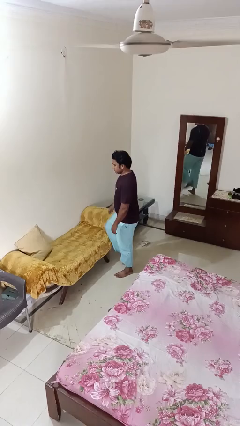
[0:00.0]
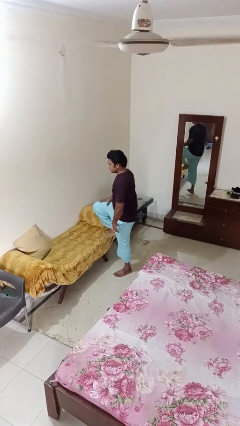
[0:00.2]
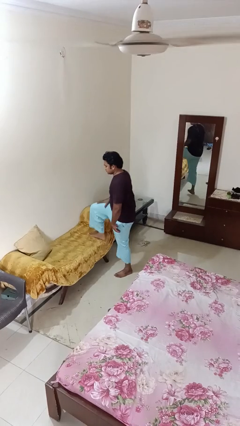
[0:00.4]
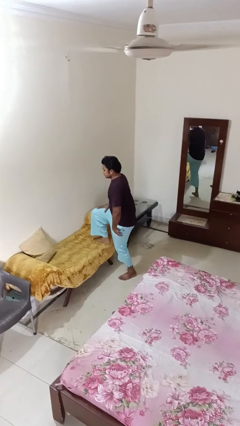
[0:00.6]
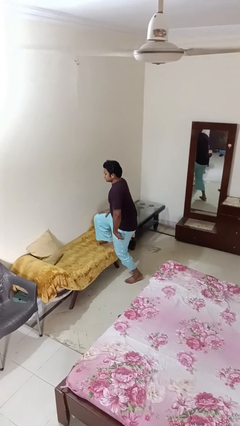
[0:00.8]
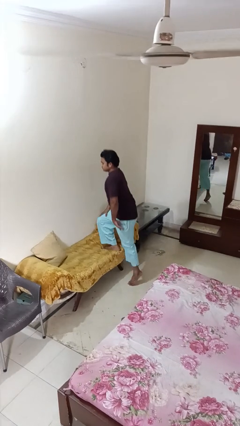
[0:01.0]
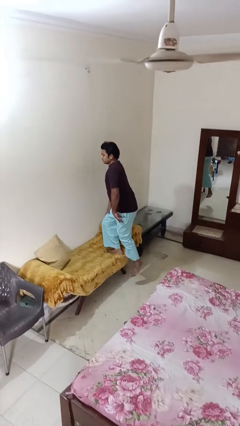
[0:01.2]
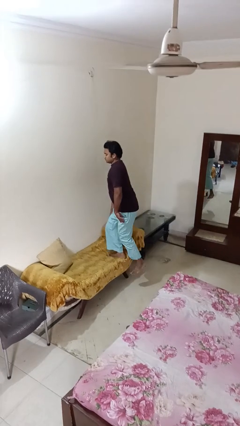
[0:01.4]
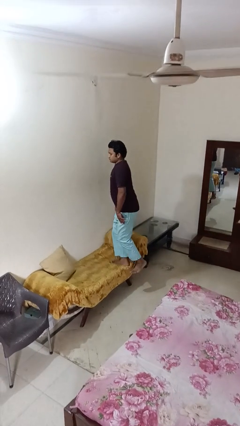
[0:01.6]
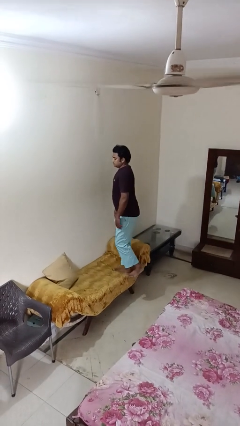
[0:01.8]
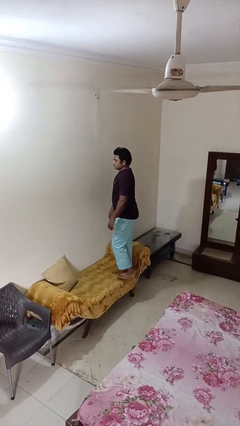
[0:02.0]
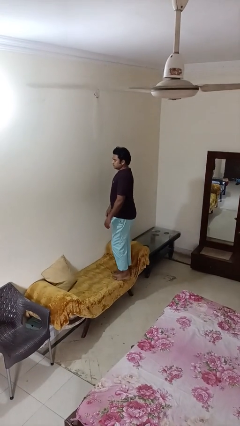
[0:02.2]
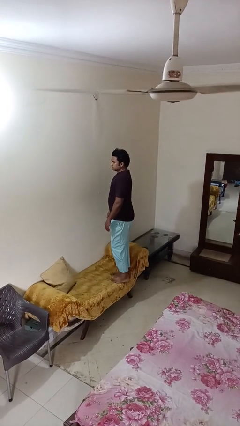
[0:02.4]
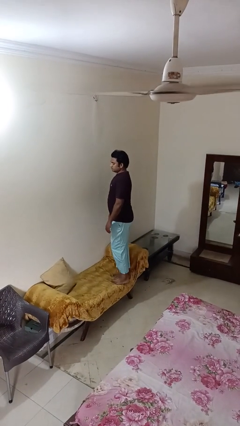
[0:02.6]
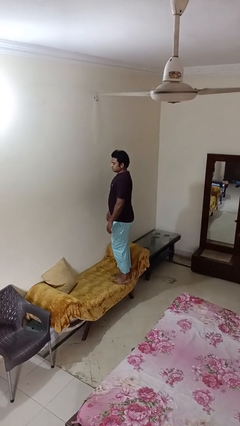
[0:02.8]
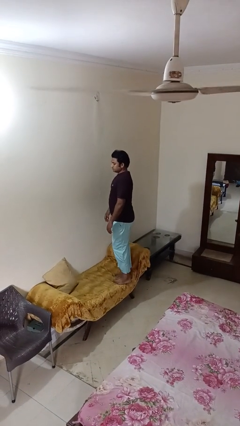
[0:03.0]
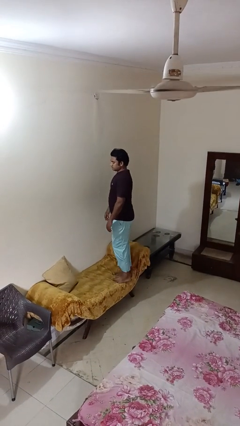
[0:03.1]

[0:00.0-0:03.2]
person climbs on couch

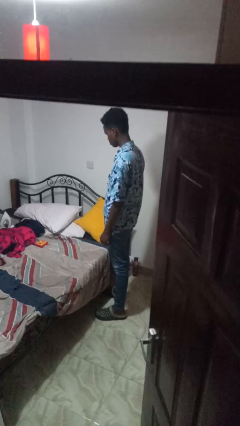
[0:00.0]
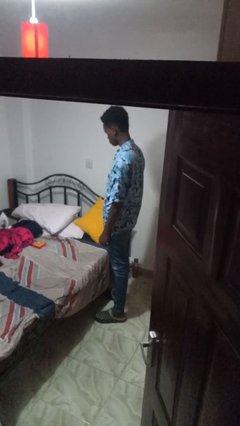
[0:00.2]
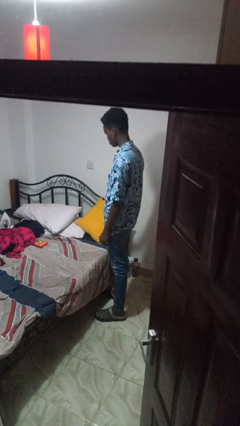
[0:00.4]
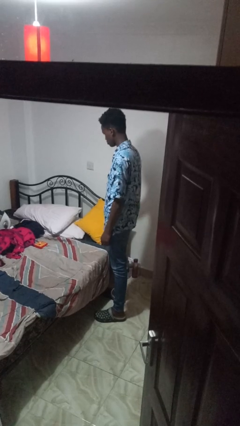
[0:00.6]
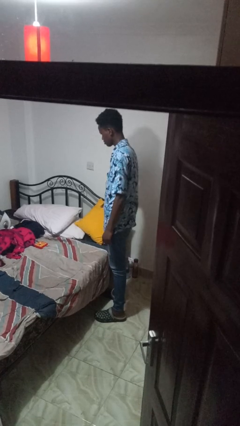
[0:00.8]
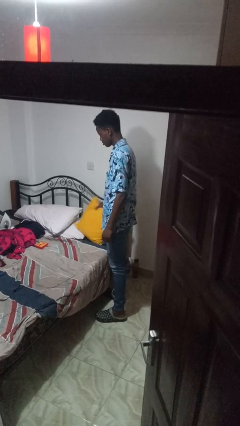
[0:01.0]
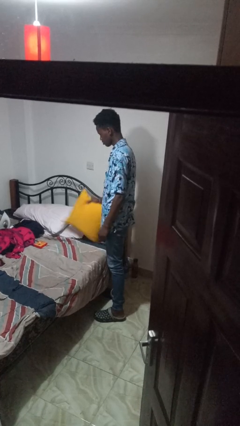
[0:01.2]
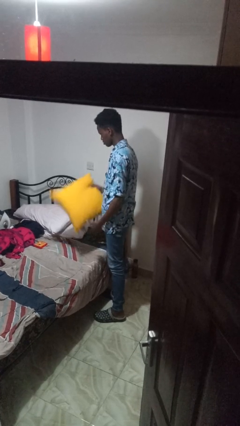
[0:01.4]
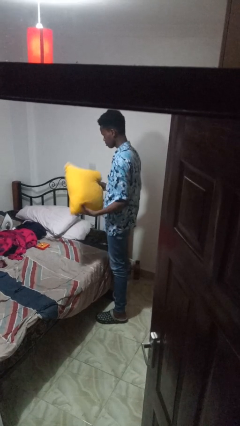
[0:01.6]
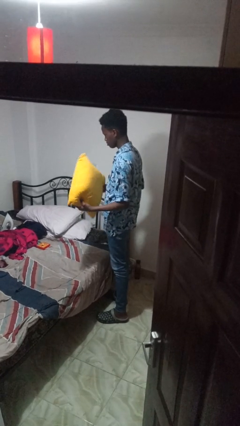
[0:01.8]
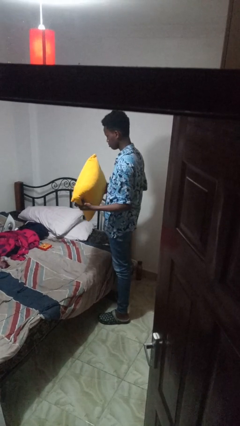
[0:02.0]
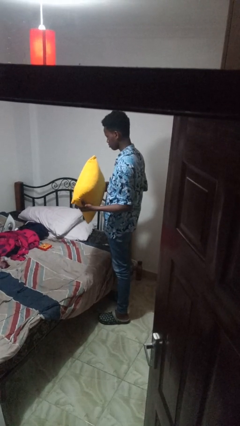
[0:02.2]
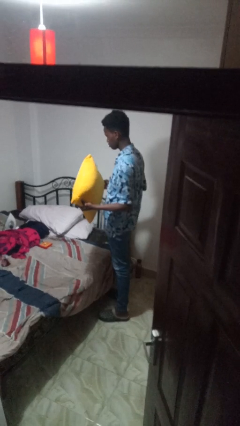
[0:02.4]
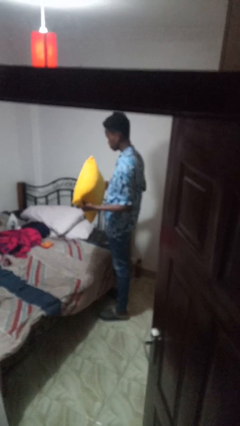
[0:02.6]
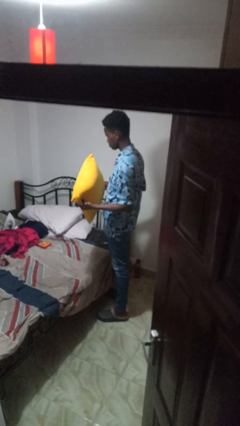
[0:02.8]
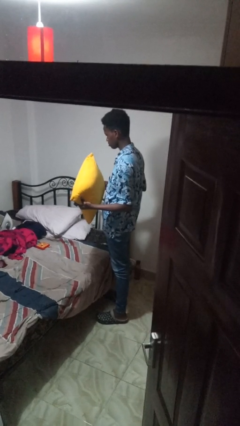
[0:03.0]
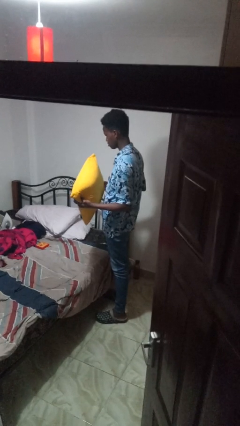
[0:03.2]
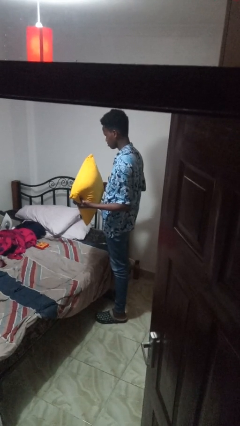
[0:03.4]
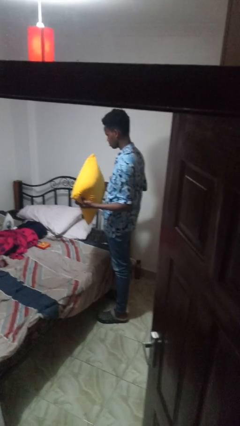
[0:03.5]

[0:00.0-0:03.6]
person picks up object from bed

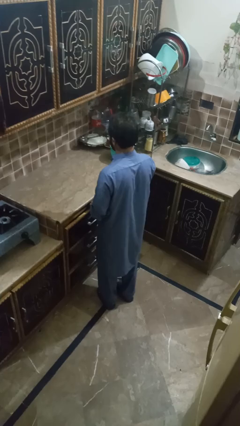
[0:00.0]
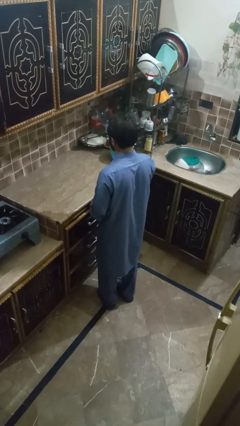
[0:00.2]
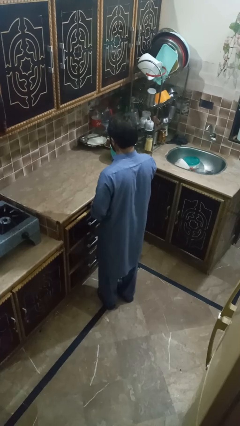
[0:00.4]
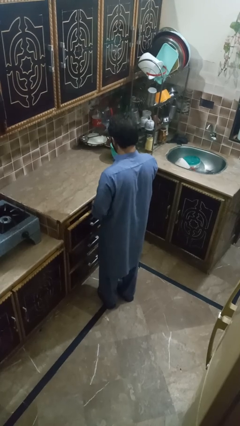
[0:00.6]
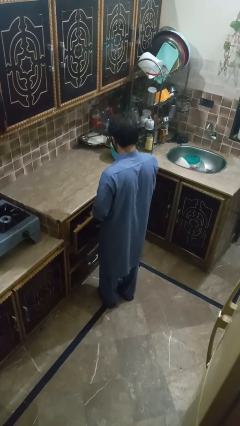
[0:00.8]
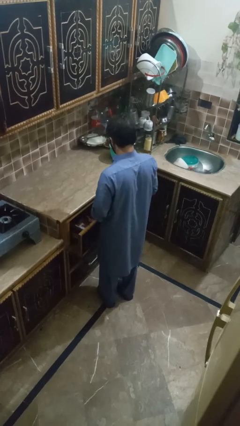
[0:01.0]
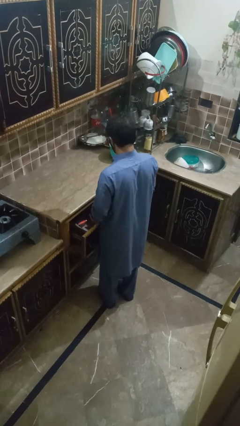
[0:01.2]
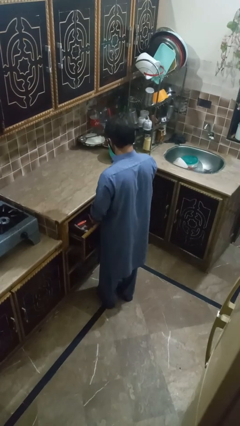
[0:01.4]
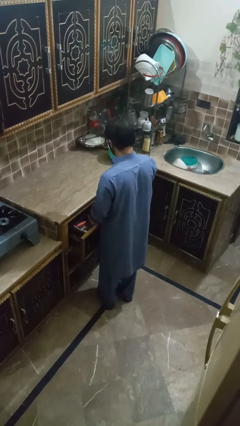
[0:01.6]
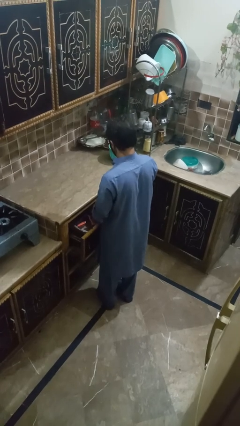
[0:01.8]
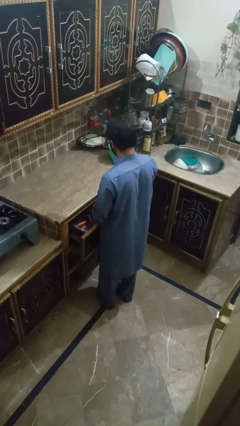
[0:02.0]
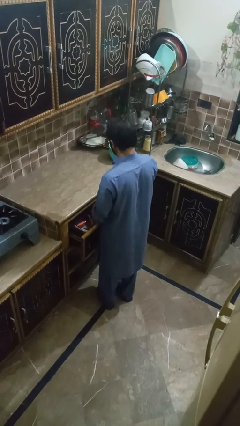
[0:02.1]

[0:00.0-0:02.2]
person searches in kitchen drawer

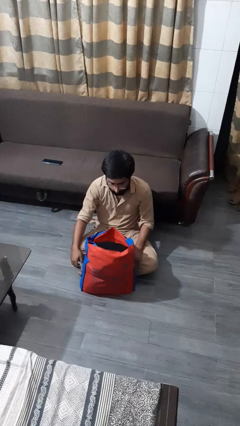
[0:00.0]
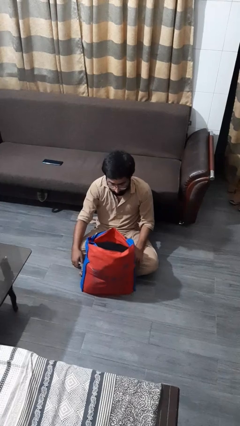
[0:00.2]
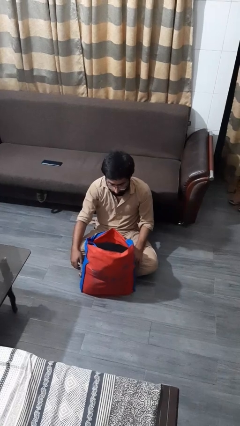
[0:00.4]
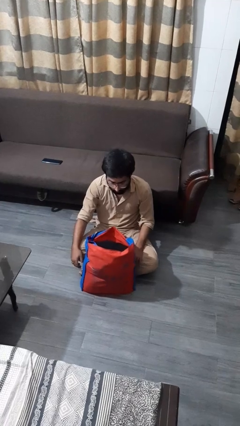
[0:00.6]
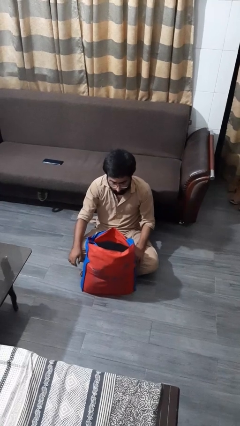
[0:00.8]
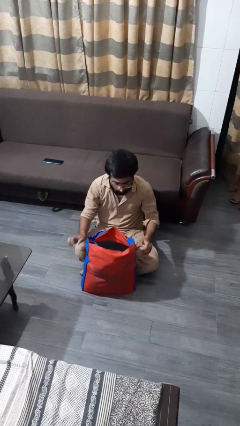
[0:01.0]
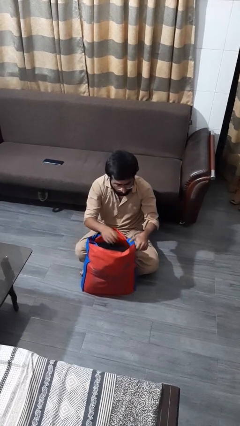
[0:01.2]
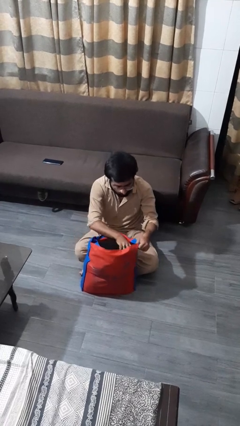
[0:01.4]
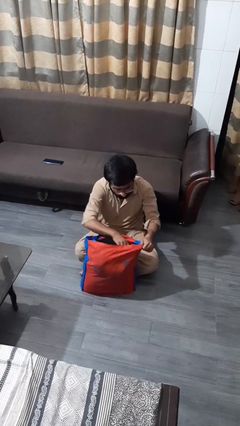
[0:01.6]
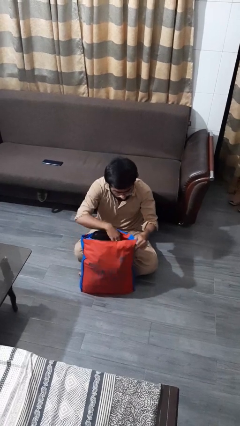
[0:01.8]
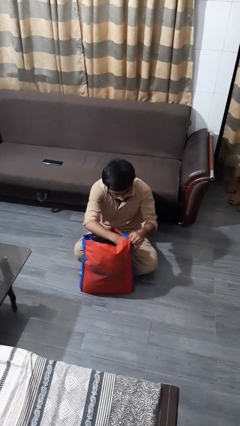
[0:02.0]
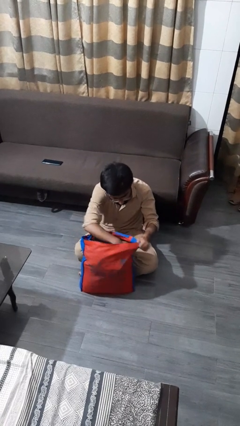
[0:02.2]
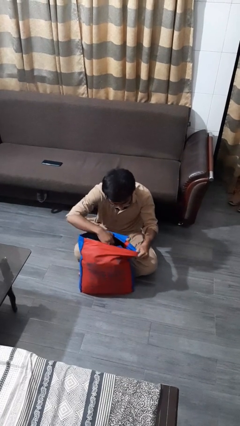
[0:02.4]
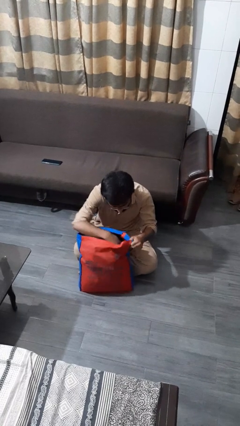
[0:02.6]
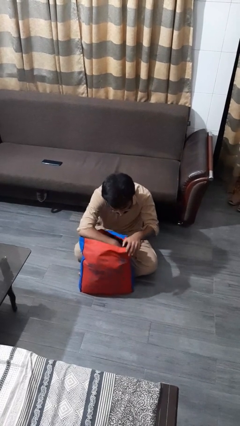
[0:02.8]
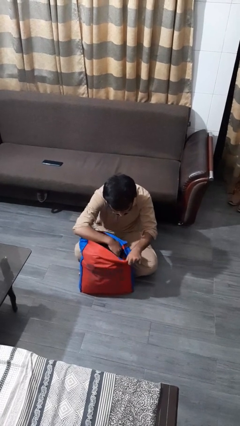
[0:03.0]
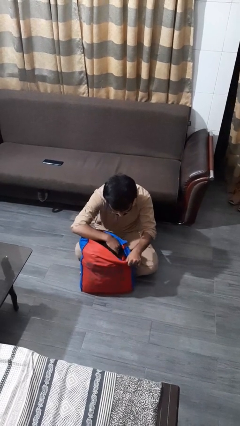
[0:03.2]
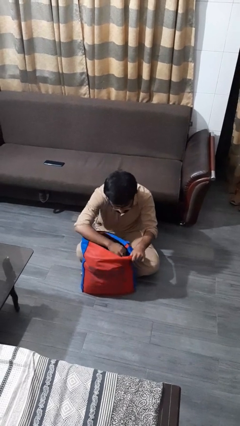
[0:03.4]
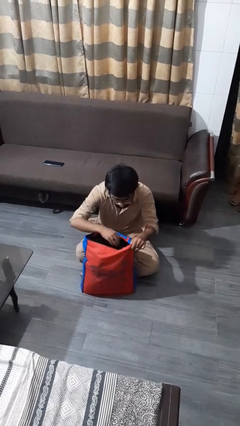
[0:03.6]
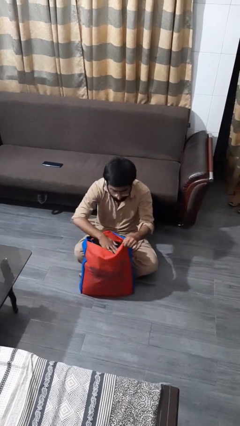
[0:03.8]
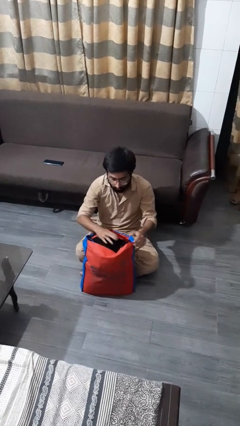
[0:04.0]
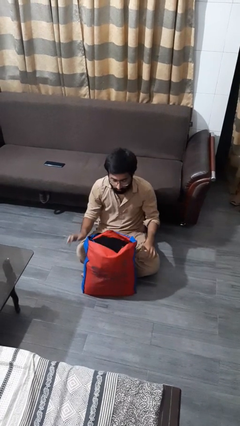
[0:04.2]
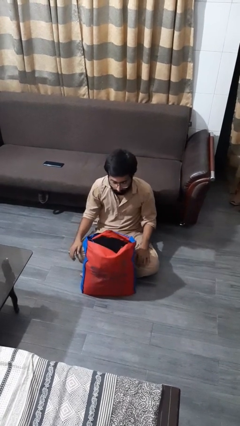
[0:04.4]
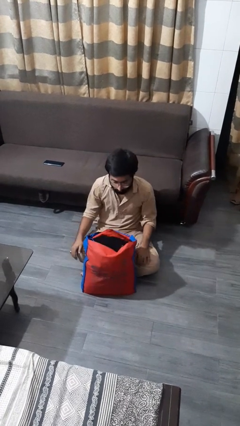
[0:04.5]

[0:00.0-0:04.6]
person searches in bag

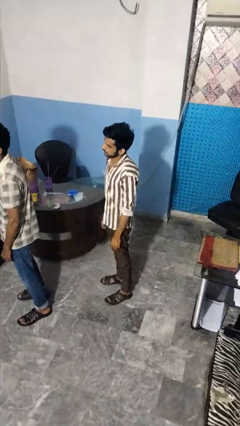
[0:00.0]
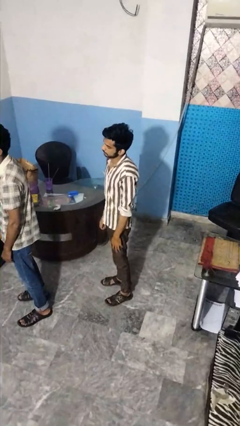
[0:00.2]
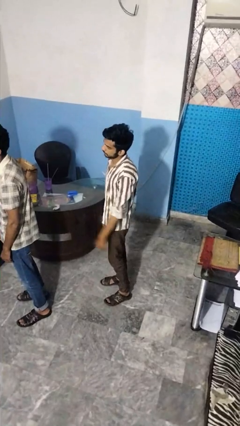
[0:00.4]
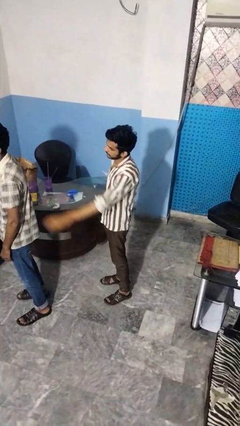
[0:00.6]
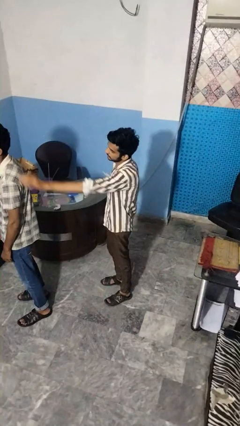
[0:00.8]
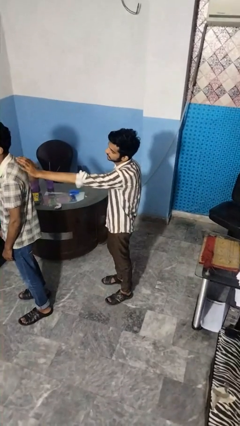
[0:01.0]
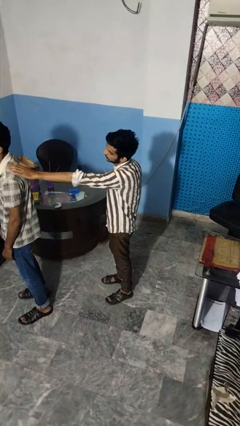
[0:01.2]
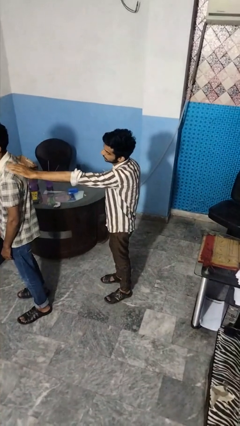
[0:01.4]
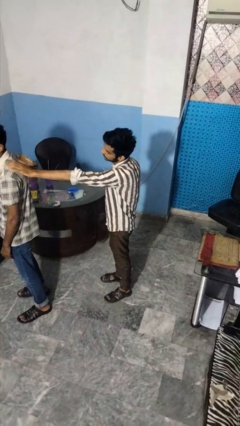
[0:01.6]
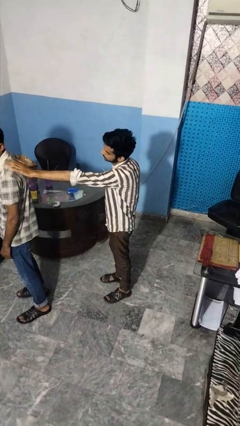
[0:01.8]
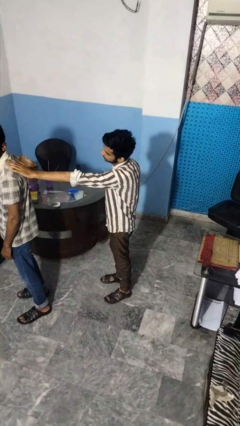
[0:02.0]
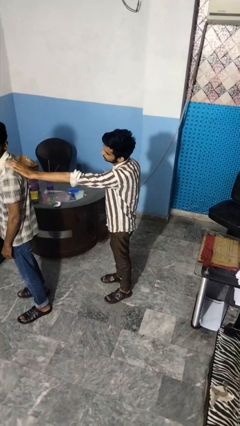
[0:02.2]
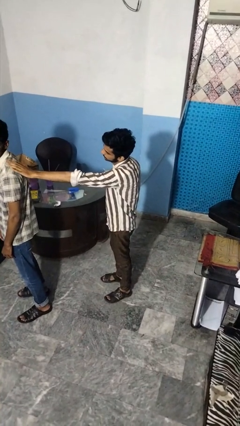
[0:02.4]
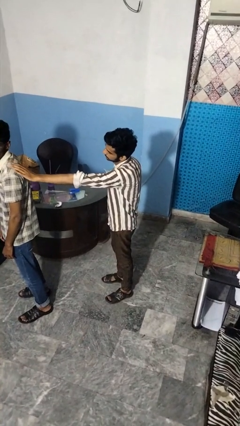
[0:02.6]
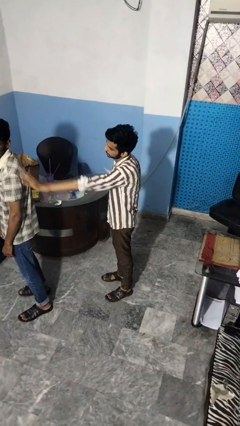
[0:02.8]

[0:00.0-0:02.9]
person touches back of person

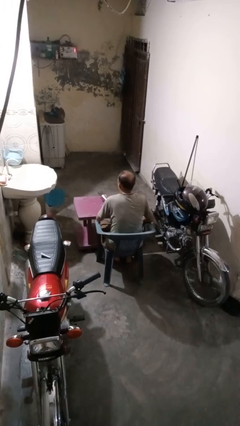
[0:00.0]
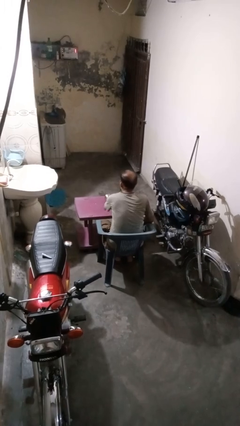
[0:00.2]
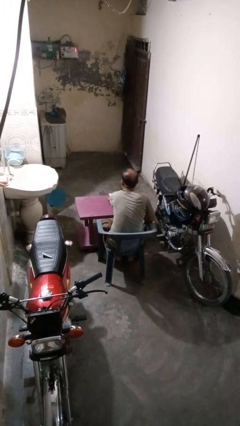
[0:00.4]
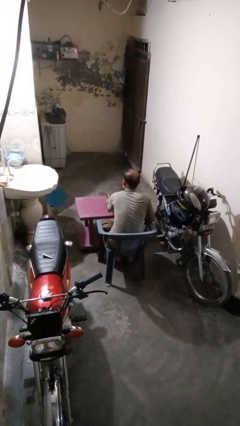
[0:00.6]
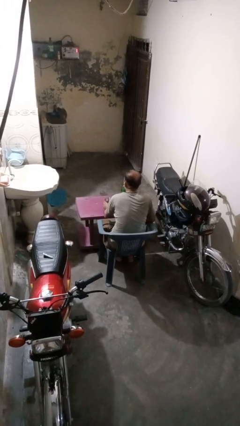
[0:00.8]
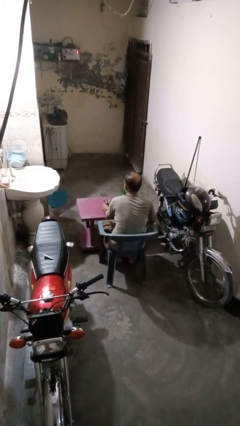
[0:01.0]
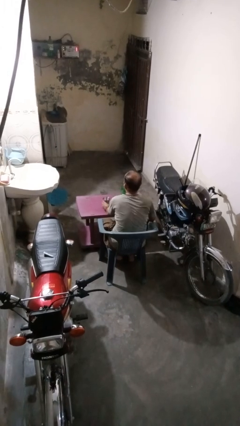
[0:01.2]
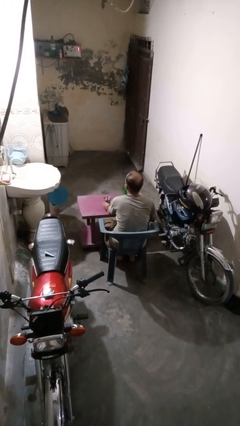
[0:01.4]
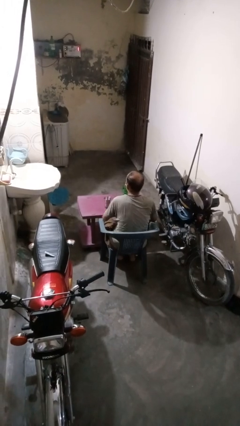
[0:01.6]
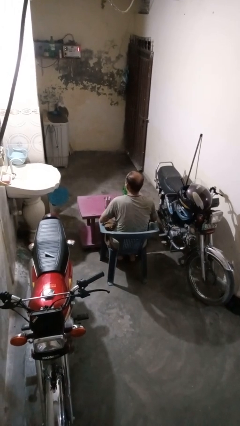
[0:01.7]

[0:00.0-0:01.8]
person sets upright glass
